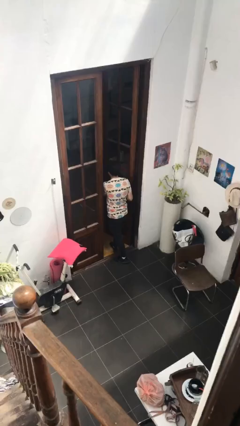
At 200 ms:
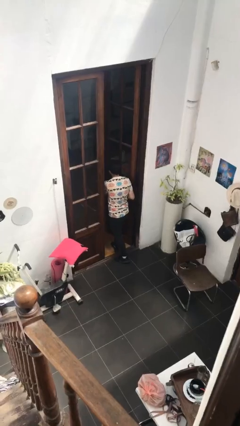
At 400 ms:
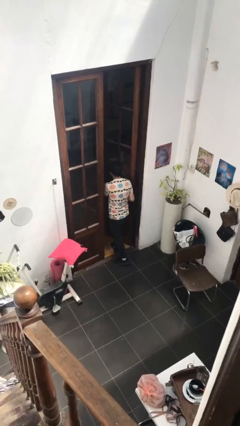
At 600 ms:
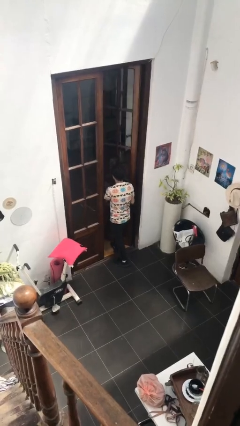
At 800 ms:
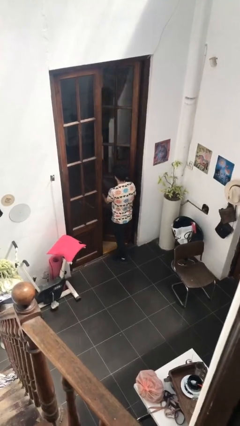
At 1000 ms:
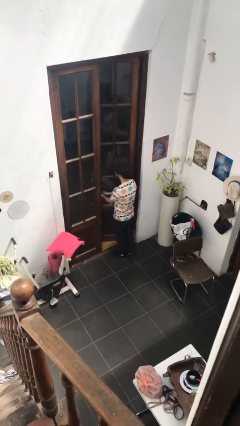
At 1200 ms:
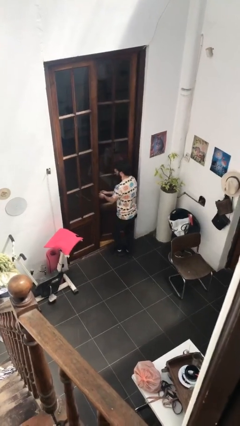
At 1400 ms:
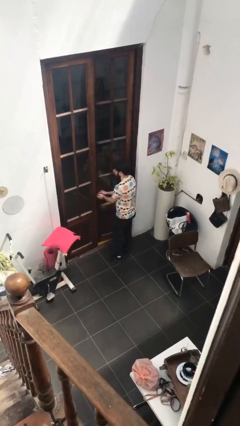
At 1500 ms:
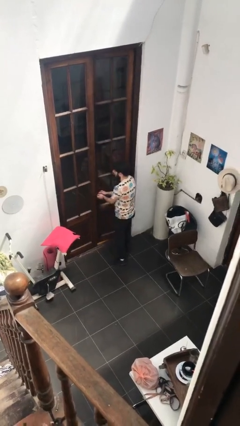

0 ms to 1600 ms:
person closes facility door

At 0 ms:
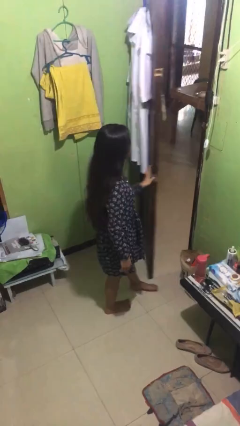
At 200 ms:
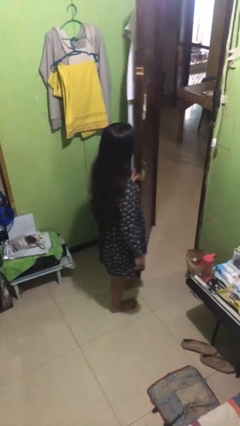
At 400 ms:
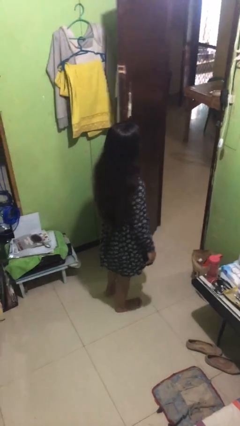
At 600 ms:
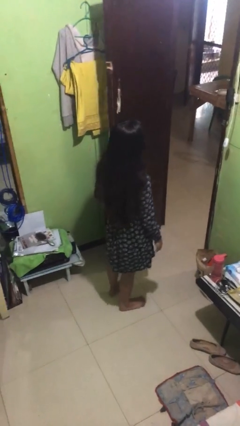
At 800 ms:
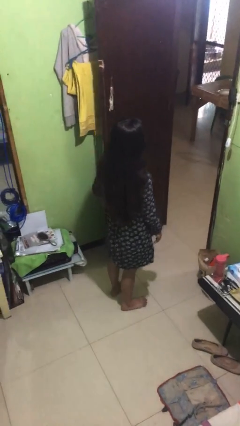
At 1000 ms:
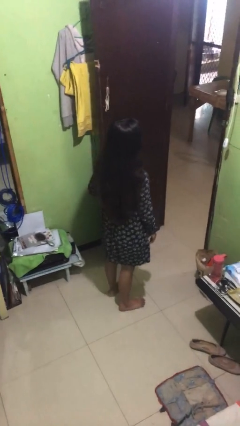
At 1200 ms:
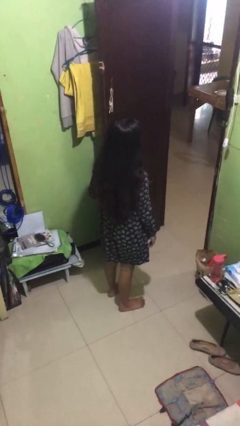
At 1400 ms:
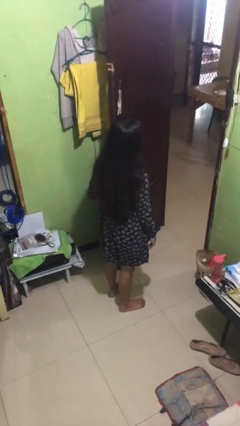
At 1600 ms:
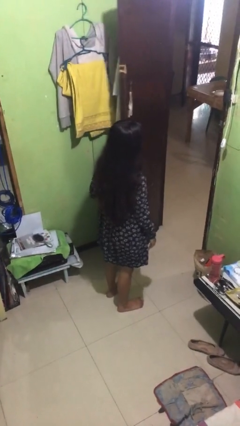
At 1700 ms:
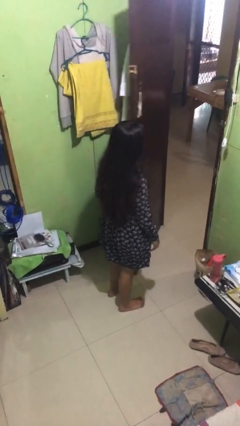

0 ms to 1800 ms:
person opens facility door

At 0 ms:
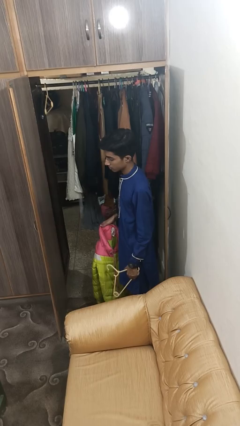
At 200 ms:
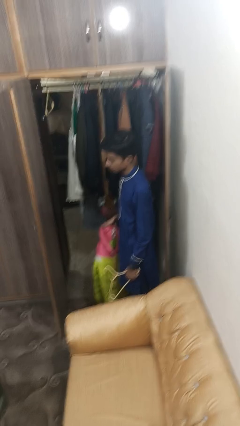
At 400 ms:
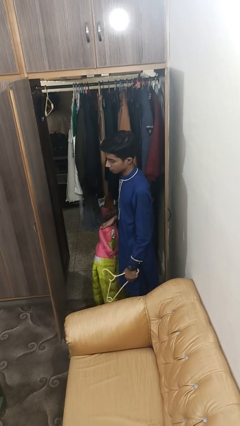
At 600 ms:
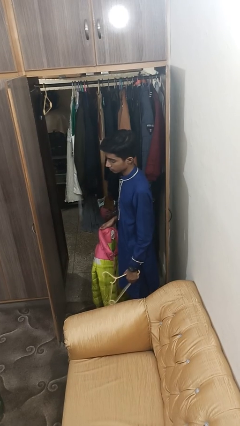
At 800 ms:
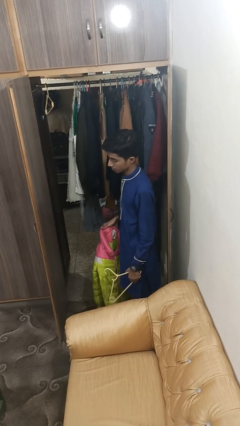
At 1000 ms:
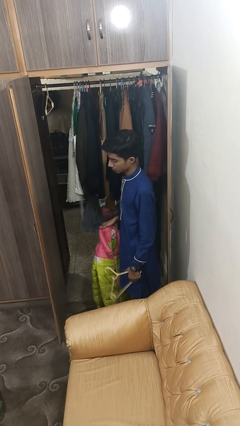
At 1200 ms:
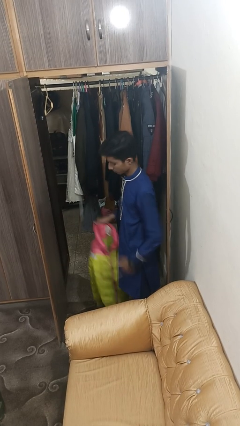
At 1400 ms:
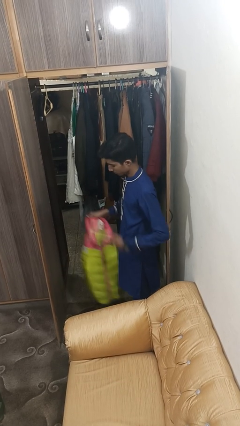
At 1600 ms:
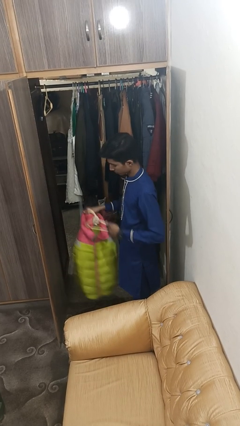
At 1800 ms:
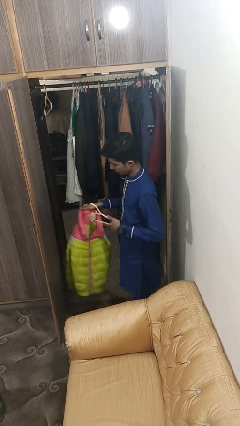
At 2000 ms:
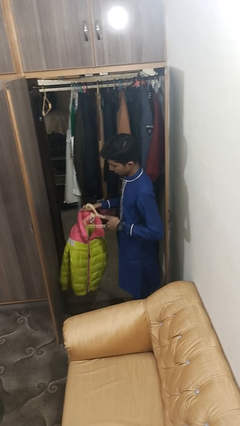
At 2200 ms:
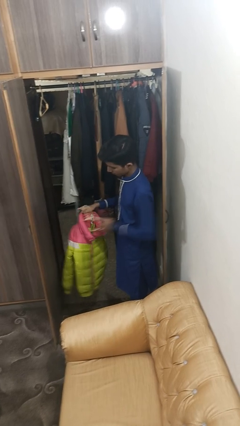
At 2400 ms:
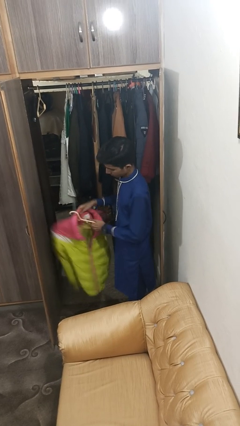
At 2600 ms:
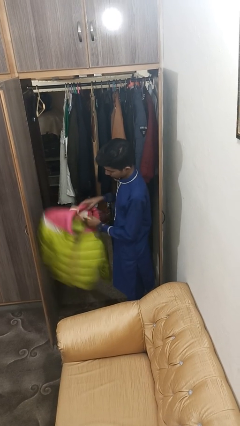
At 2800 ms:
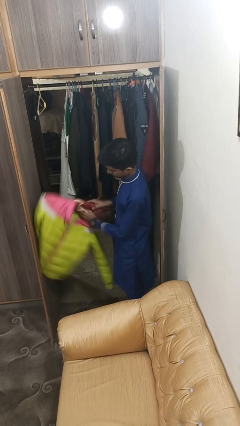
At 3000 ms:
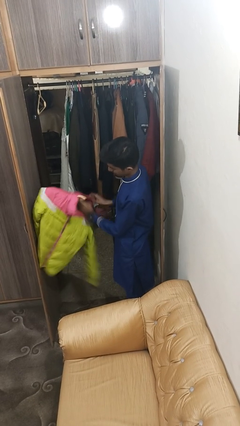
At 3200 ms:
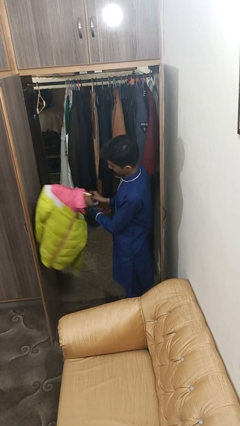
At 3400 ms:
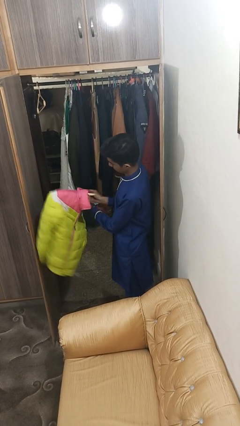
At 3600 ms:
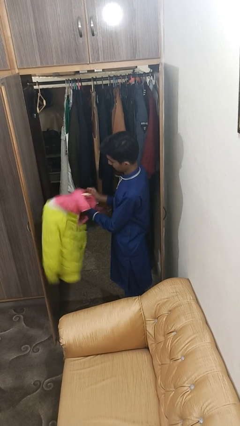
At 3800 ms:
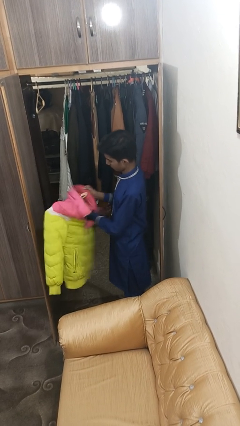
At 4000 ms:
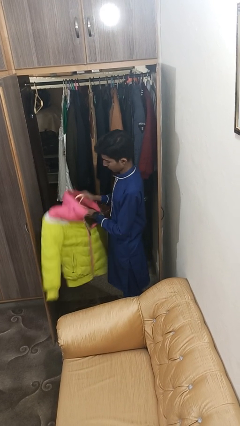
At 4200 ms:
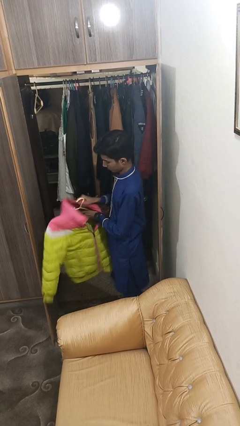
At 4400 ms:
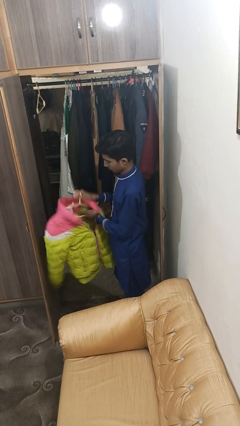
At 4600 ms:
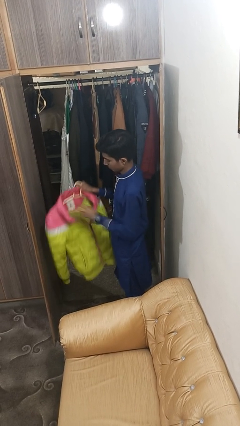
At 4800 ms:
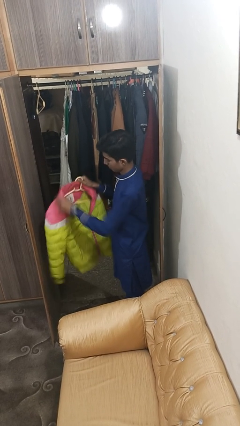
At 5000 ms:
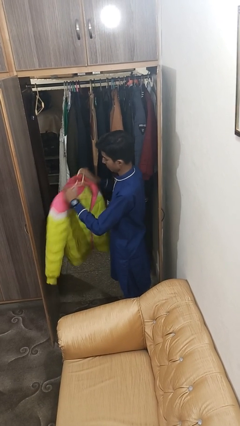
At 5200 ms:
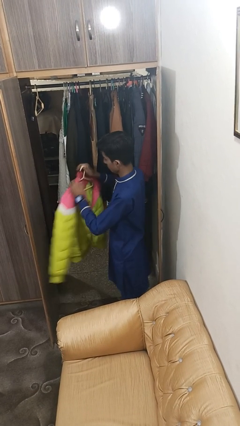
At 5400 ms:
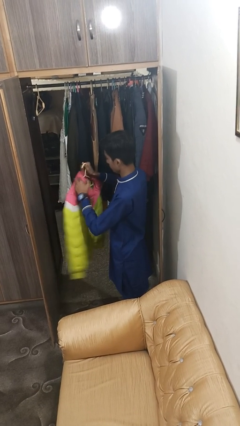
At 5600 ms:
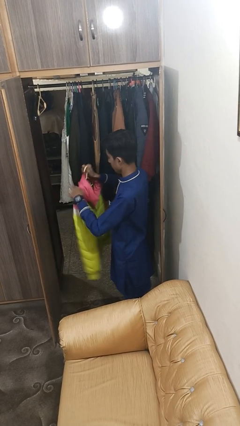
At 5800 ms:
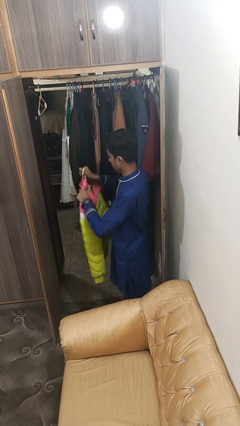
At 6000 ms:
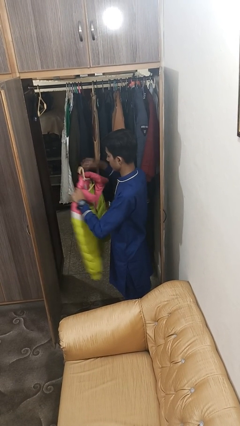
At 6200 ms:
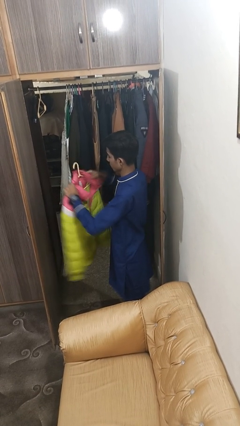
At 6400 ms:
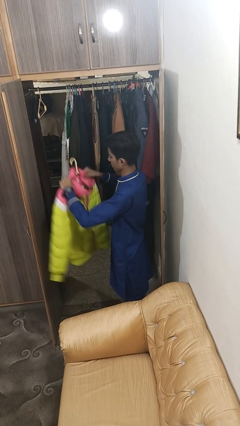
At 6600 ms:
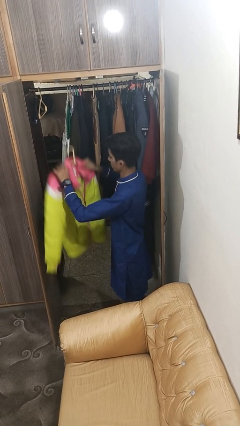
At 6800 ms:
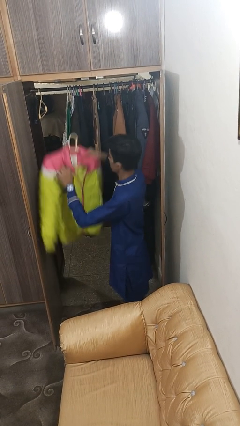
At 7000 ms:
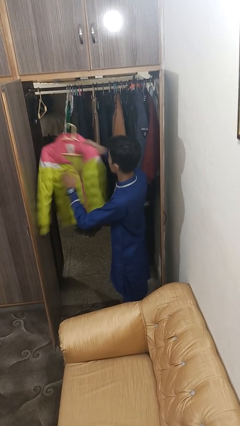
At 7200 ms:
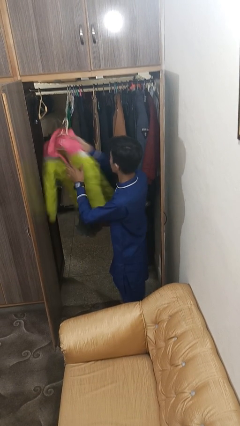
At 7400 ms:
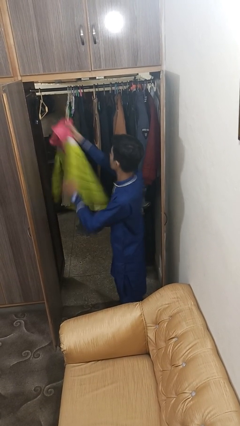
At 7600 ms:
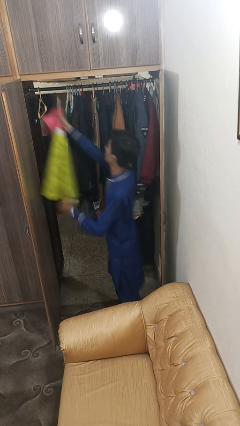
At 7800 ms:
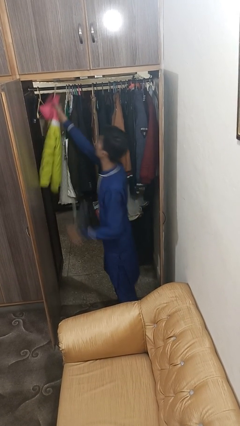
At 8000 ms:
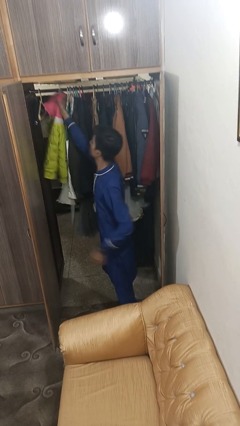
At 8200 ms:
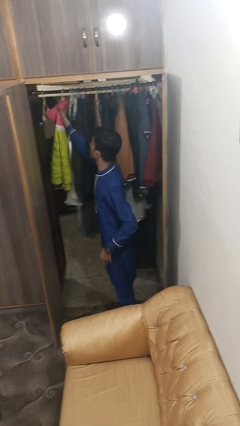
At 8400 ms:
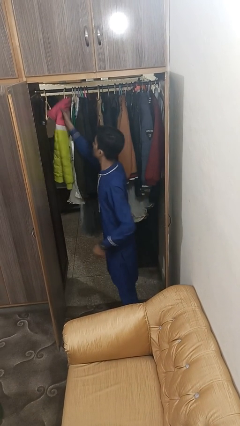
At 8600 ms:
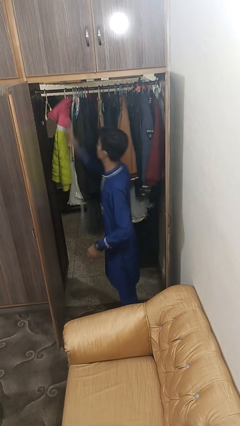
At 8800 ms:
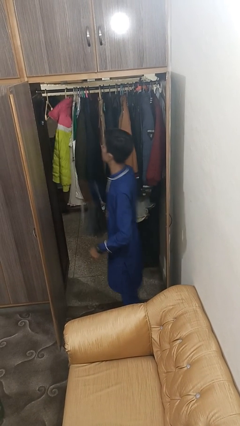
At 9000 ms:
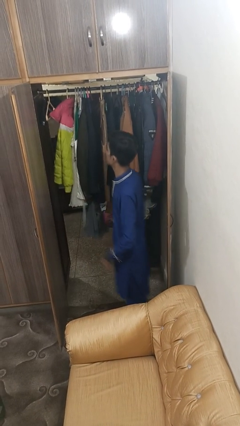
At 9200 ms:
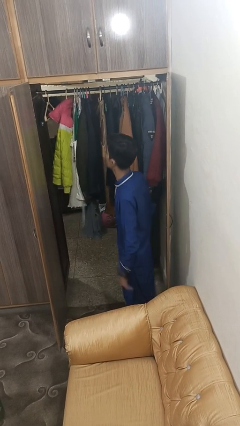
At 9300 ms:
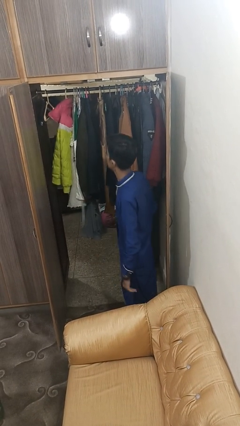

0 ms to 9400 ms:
person puts clothes into closet

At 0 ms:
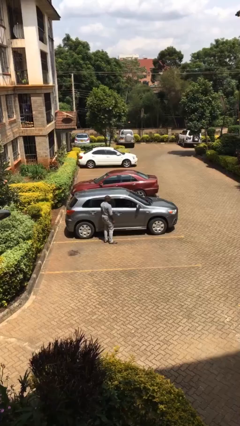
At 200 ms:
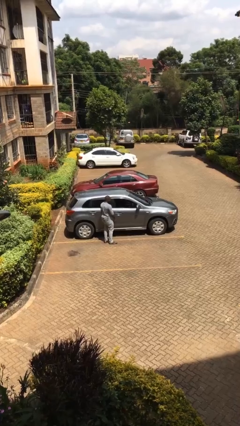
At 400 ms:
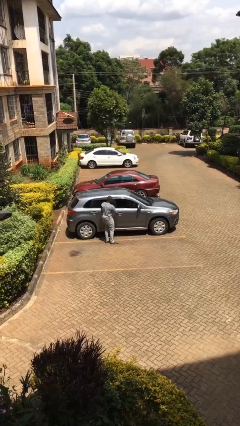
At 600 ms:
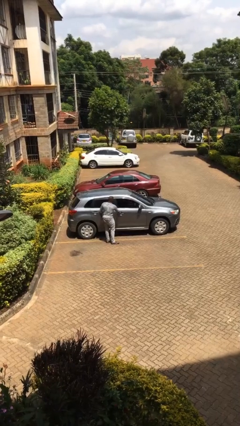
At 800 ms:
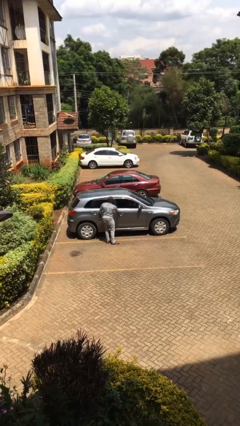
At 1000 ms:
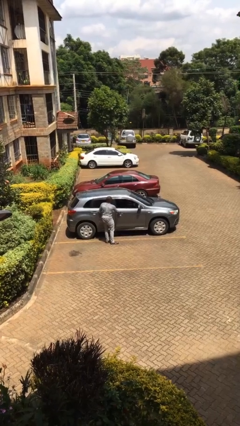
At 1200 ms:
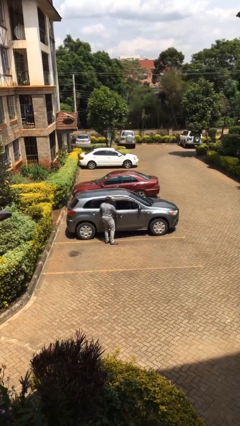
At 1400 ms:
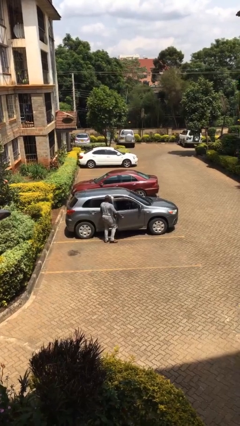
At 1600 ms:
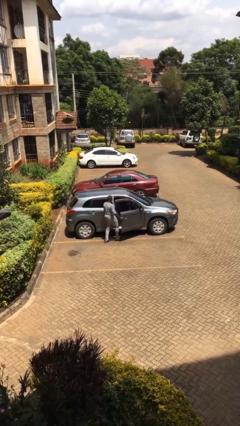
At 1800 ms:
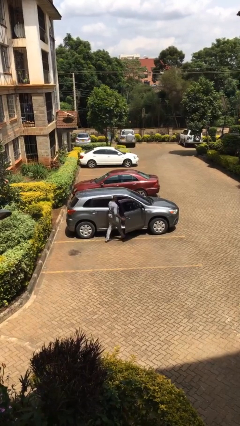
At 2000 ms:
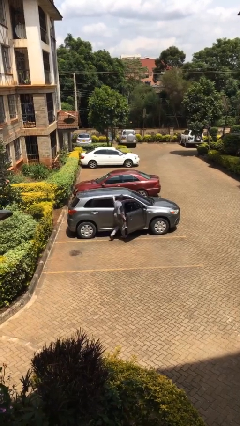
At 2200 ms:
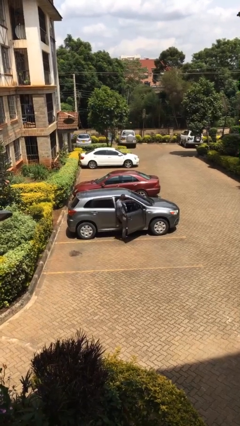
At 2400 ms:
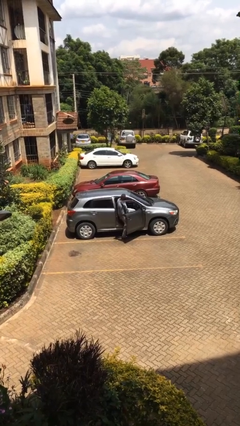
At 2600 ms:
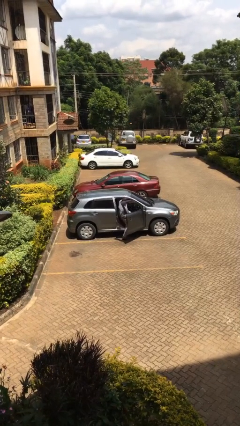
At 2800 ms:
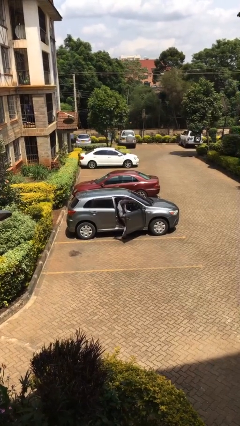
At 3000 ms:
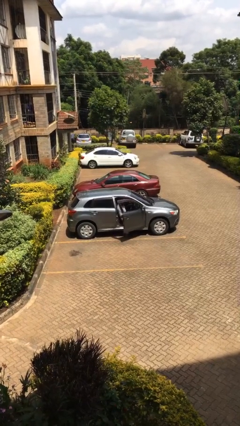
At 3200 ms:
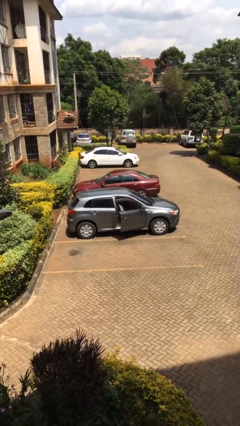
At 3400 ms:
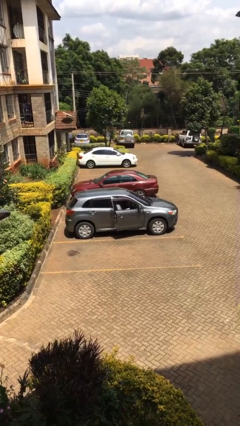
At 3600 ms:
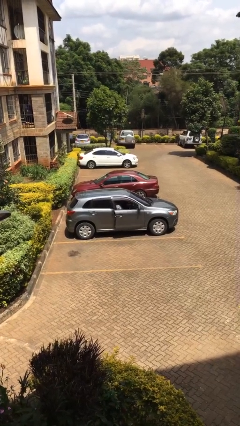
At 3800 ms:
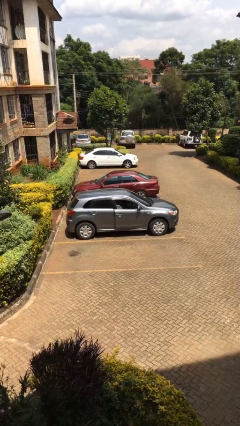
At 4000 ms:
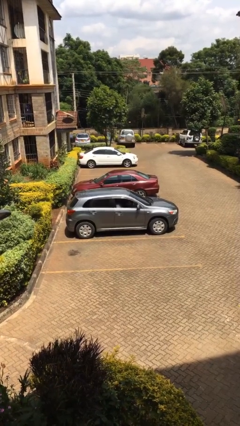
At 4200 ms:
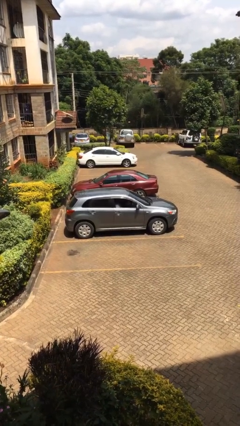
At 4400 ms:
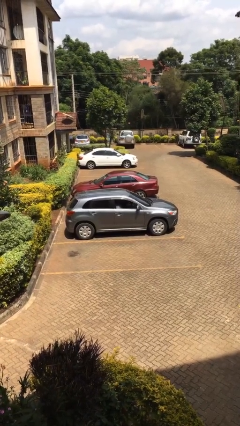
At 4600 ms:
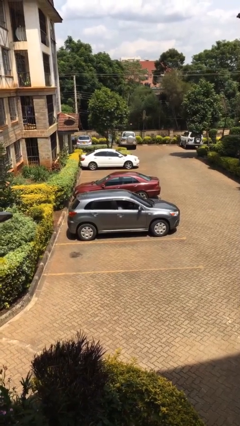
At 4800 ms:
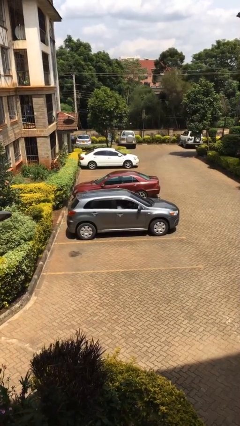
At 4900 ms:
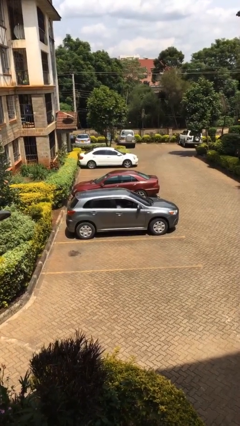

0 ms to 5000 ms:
car picks up person

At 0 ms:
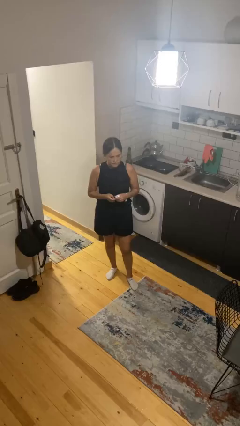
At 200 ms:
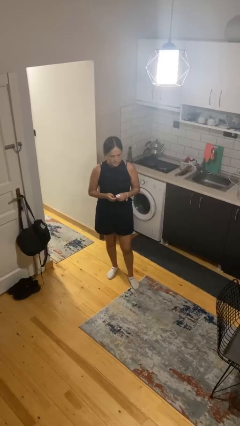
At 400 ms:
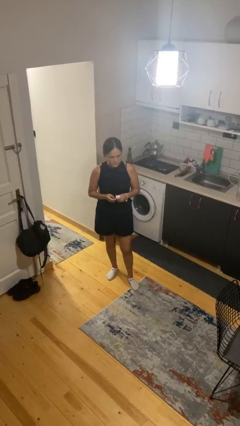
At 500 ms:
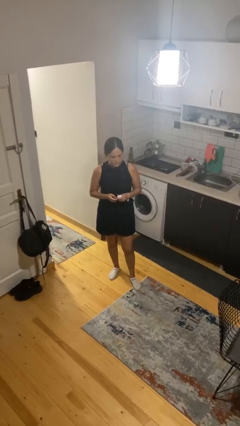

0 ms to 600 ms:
person applies sunscreen
